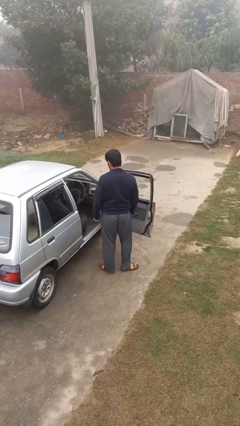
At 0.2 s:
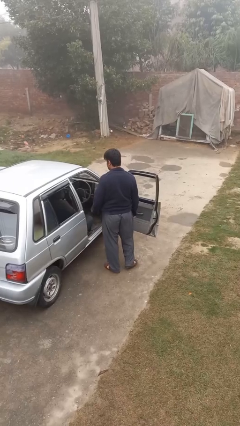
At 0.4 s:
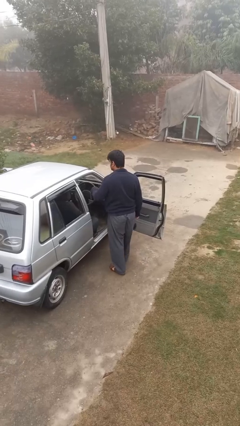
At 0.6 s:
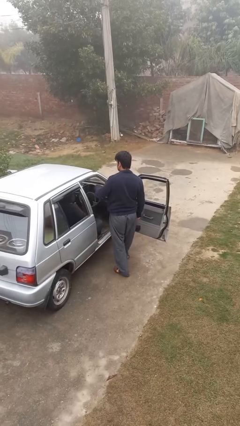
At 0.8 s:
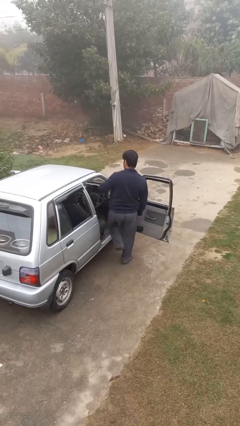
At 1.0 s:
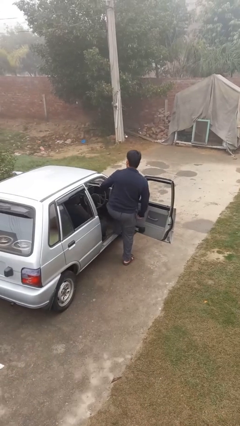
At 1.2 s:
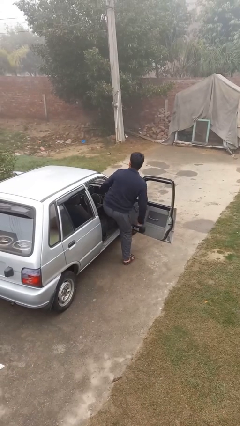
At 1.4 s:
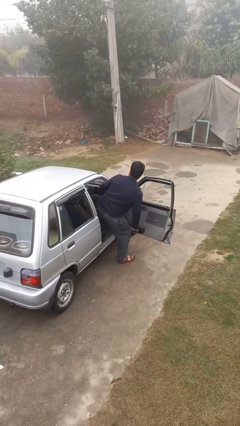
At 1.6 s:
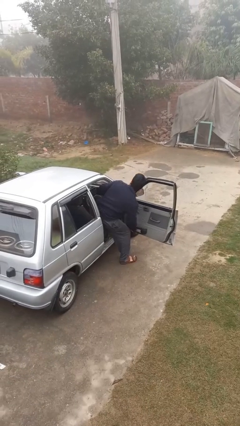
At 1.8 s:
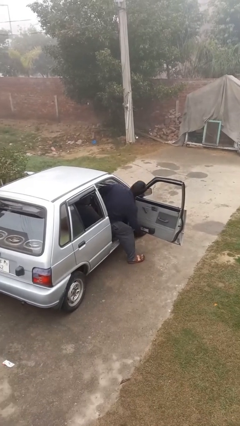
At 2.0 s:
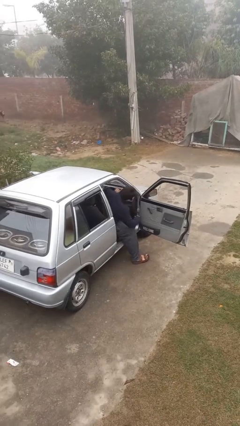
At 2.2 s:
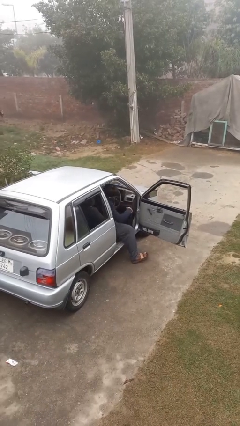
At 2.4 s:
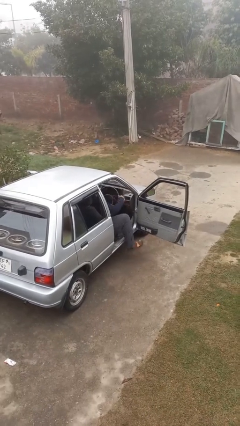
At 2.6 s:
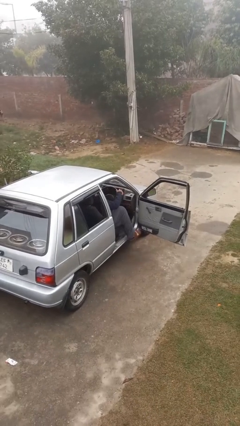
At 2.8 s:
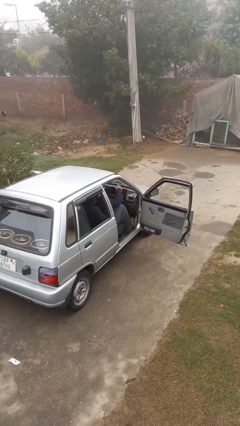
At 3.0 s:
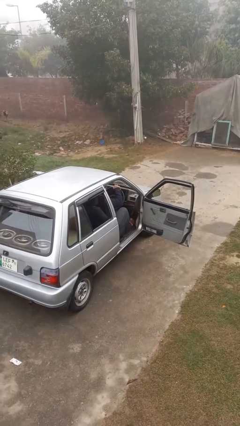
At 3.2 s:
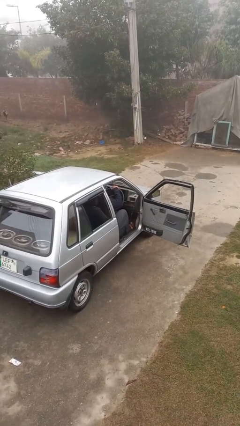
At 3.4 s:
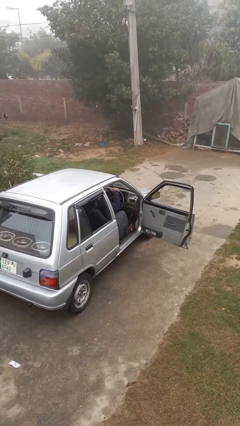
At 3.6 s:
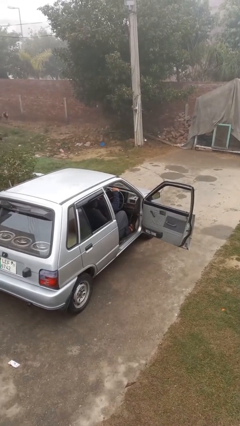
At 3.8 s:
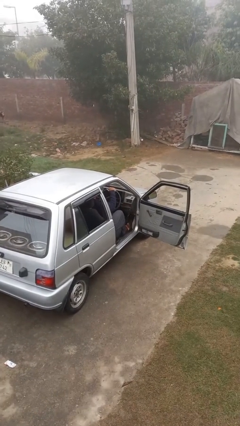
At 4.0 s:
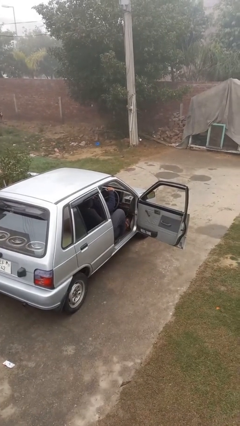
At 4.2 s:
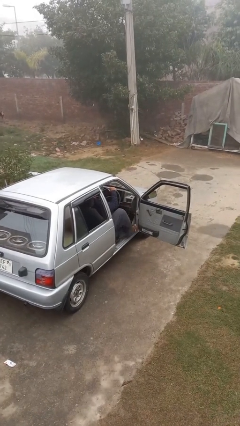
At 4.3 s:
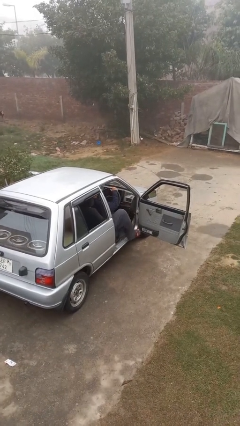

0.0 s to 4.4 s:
person enters car

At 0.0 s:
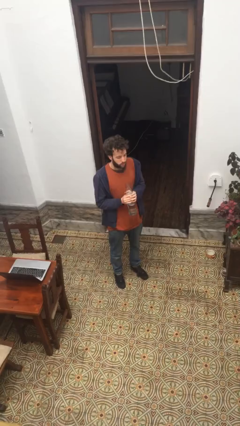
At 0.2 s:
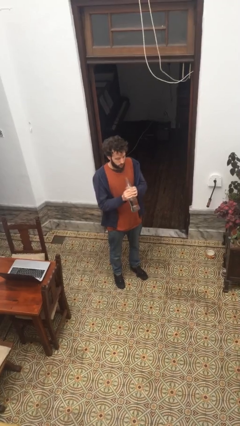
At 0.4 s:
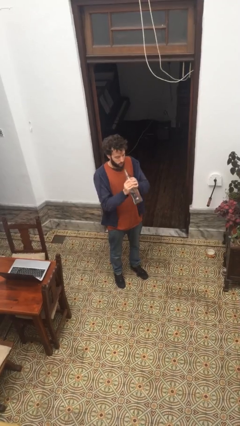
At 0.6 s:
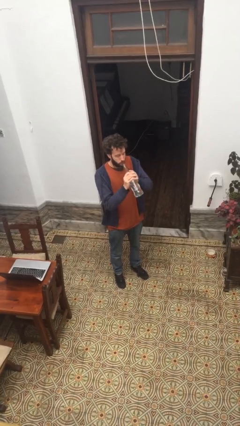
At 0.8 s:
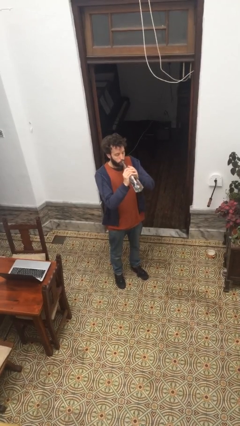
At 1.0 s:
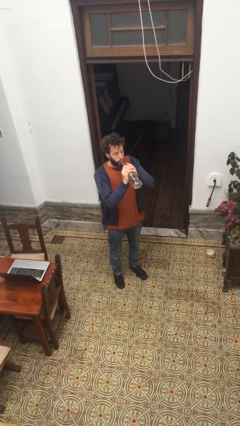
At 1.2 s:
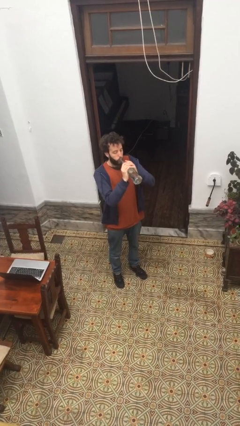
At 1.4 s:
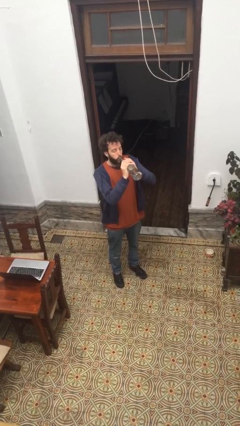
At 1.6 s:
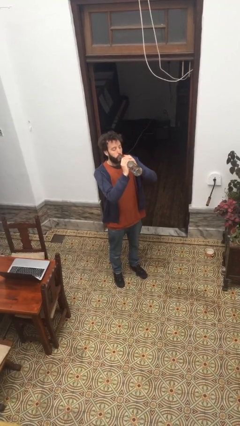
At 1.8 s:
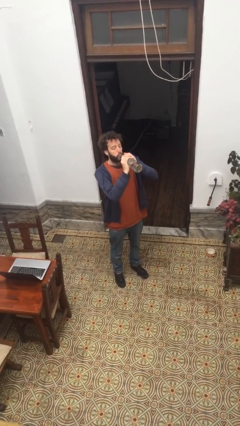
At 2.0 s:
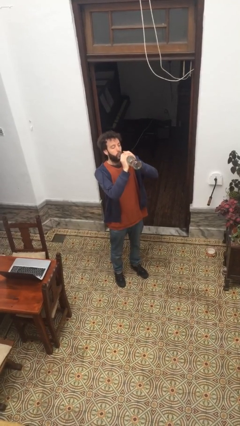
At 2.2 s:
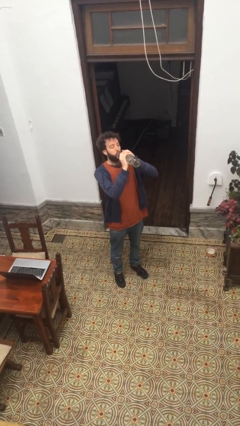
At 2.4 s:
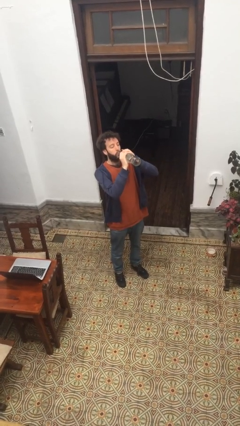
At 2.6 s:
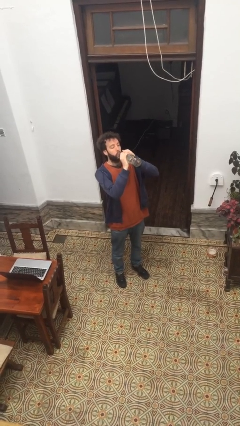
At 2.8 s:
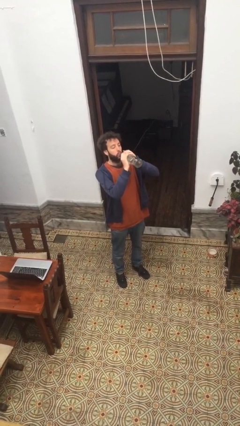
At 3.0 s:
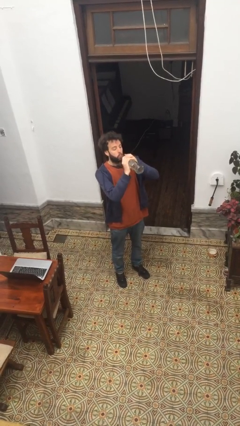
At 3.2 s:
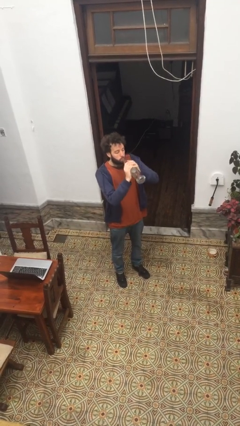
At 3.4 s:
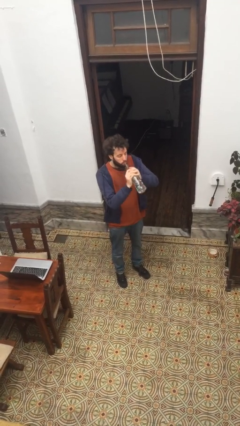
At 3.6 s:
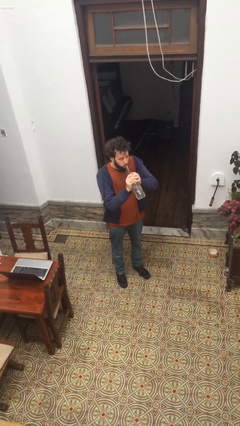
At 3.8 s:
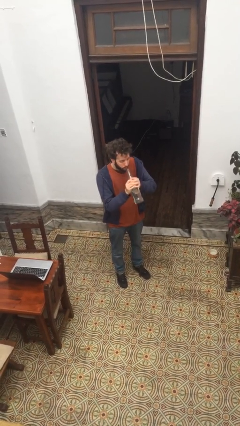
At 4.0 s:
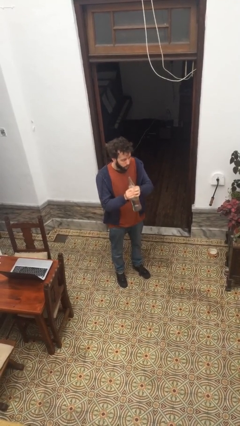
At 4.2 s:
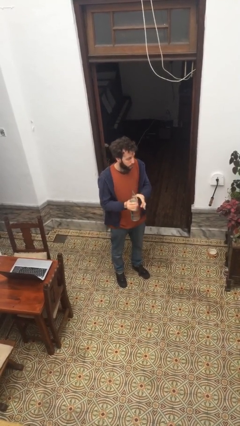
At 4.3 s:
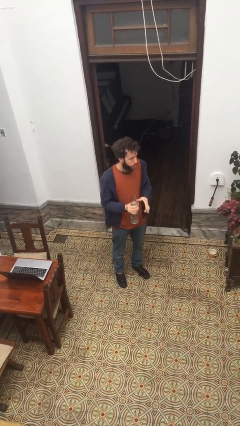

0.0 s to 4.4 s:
person drinks from bottle

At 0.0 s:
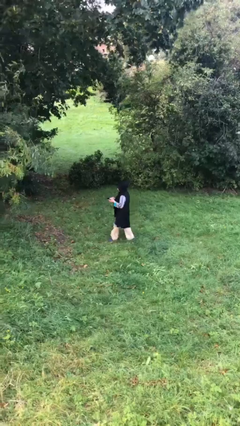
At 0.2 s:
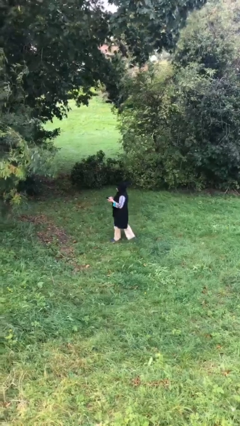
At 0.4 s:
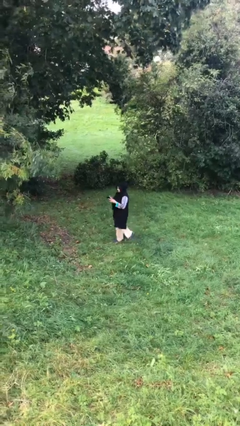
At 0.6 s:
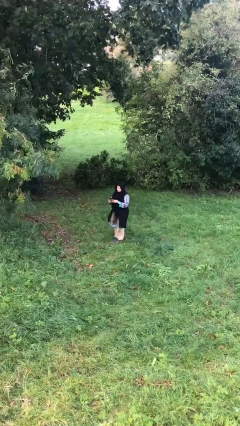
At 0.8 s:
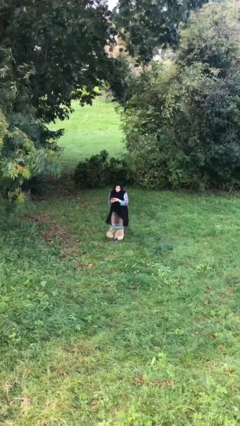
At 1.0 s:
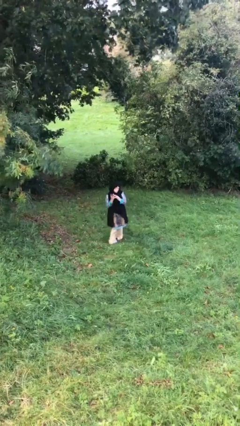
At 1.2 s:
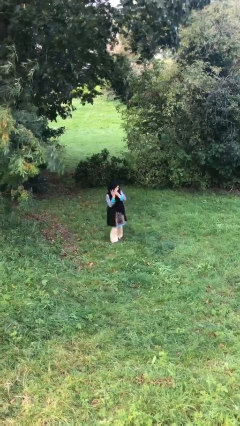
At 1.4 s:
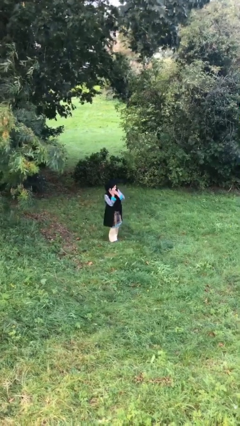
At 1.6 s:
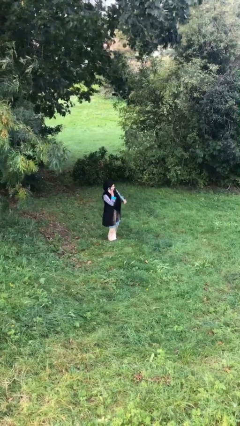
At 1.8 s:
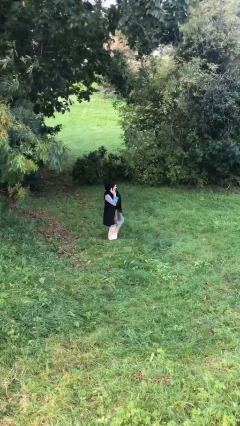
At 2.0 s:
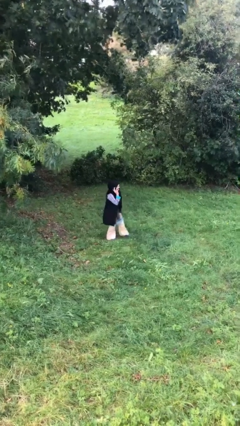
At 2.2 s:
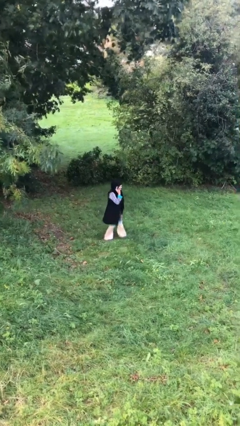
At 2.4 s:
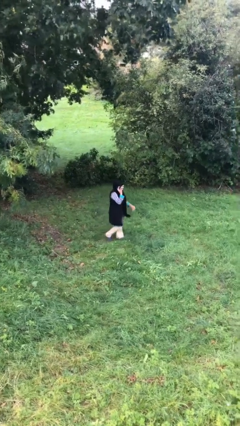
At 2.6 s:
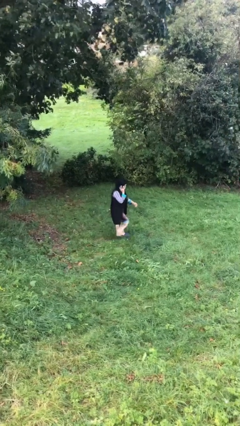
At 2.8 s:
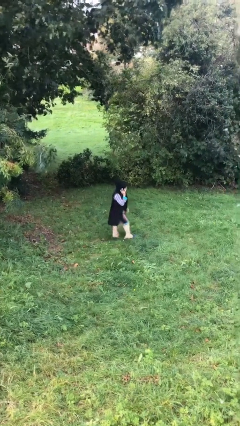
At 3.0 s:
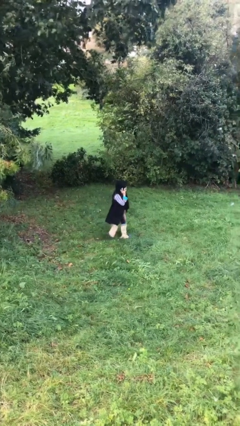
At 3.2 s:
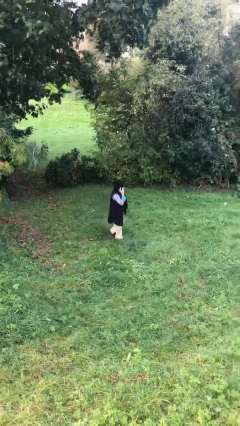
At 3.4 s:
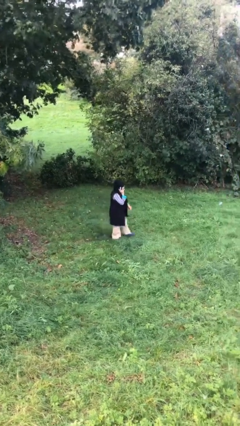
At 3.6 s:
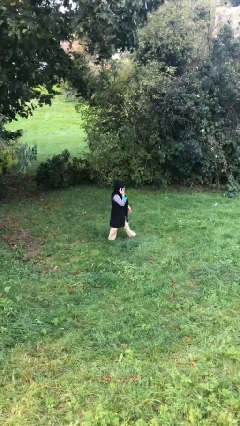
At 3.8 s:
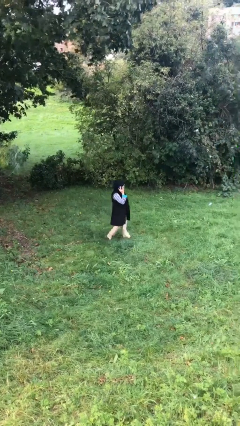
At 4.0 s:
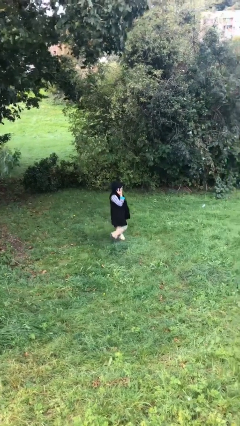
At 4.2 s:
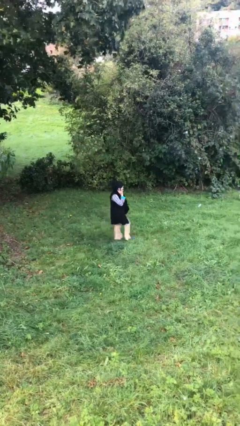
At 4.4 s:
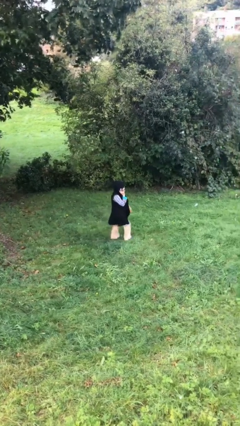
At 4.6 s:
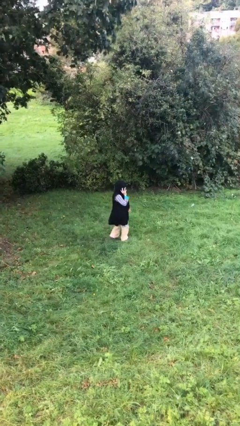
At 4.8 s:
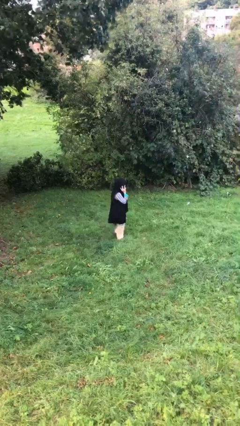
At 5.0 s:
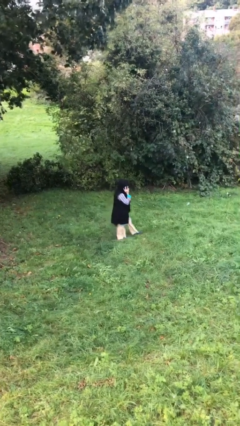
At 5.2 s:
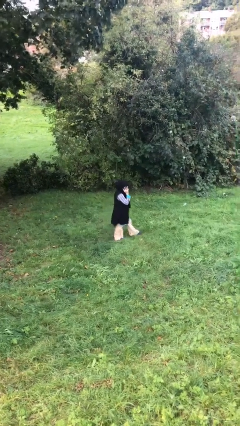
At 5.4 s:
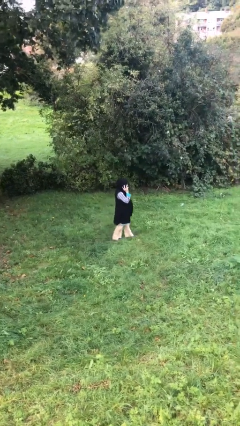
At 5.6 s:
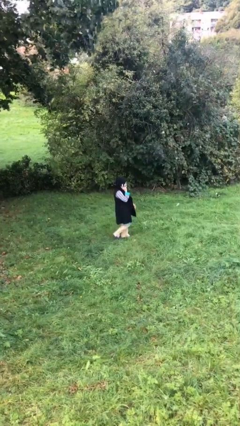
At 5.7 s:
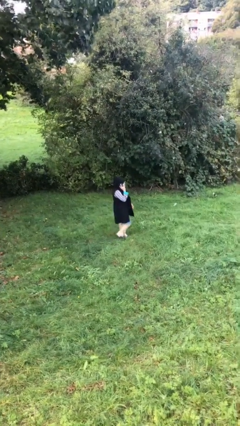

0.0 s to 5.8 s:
person talks on phone

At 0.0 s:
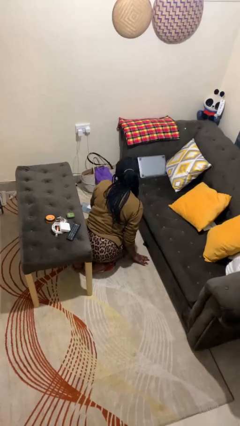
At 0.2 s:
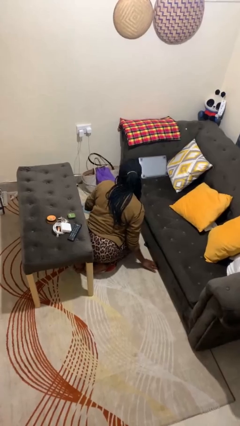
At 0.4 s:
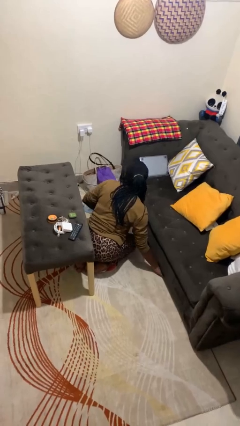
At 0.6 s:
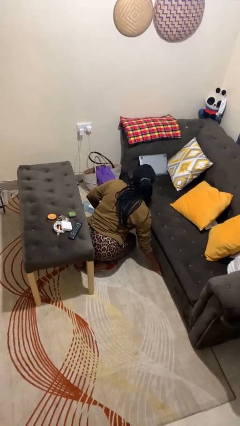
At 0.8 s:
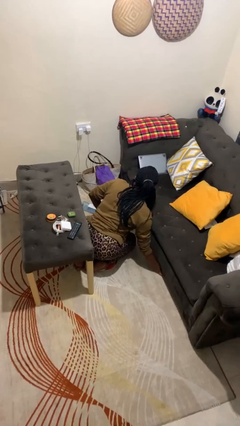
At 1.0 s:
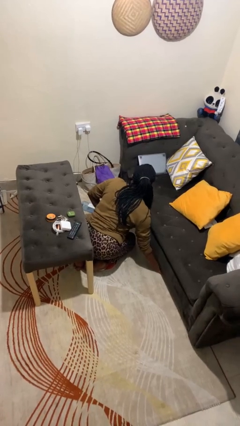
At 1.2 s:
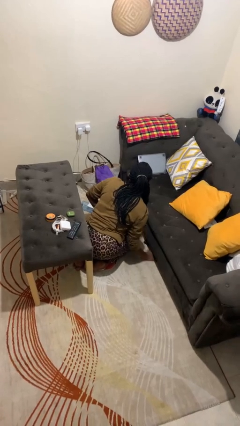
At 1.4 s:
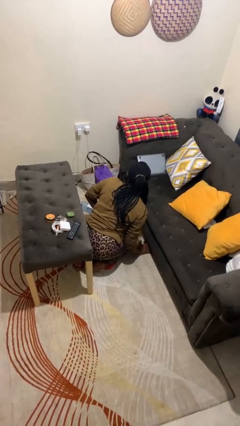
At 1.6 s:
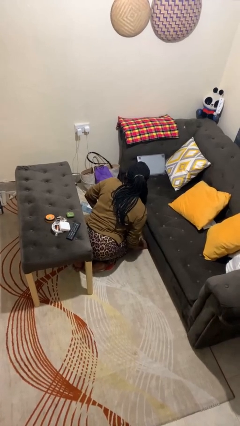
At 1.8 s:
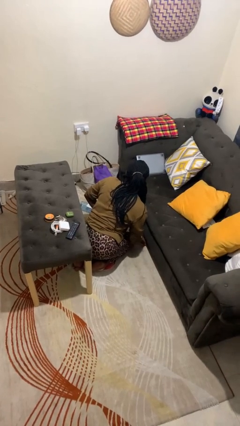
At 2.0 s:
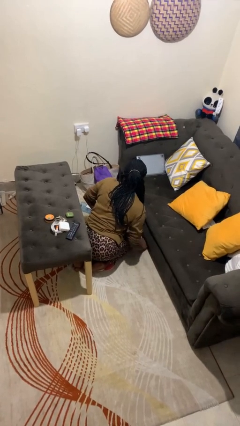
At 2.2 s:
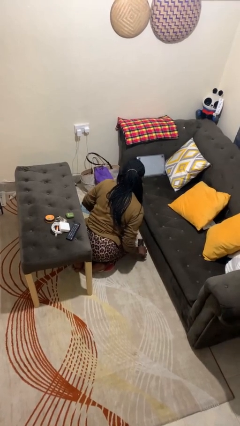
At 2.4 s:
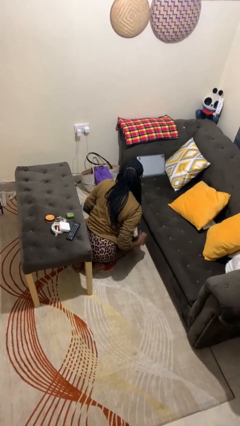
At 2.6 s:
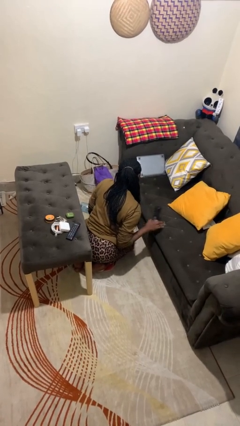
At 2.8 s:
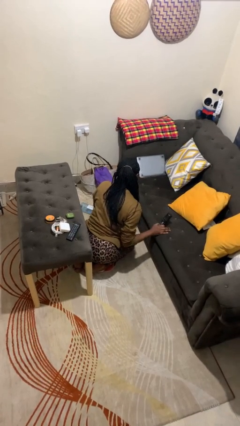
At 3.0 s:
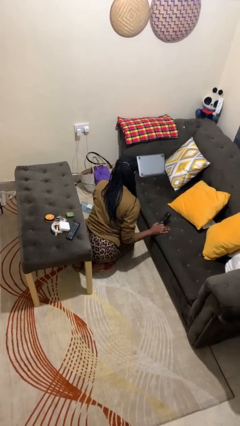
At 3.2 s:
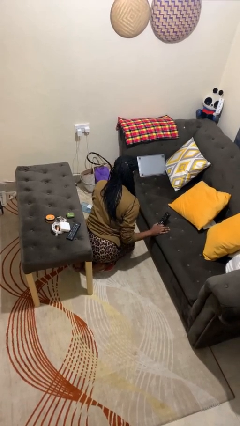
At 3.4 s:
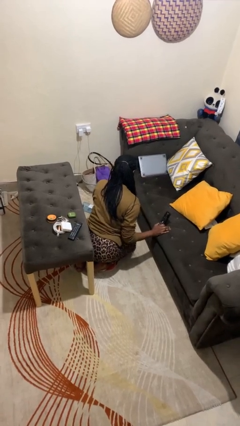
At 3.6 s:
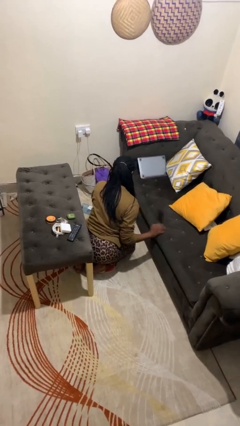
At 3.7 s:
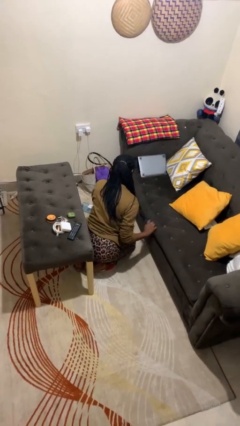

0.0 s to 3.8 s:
person searches under couch
